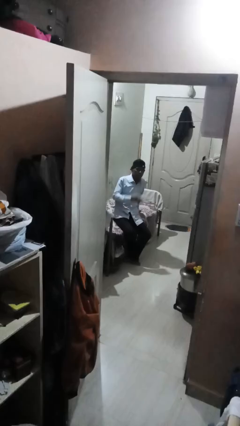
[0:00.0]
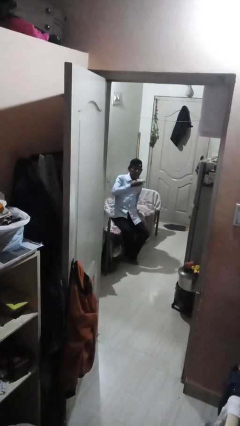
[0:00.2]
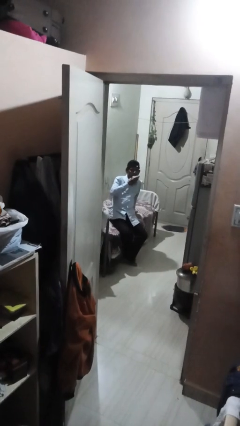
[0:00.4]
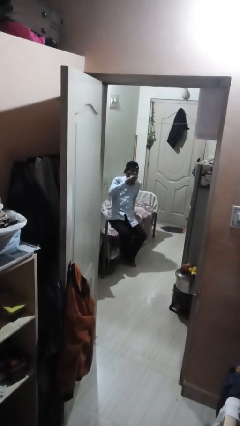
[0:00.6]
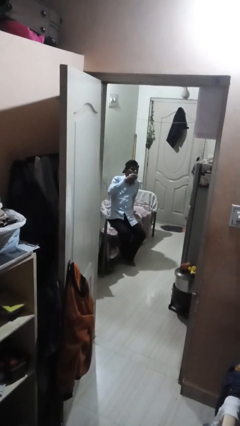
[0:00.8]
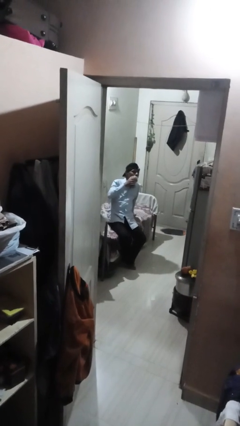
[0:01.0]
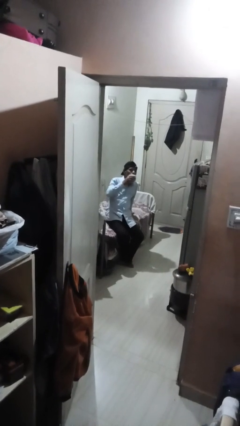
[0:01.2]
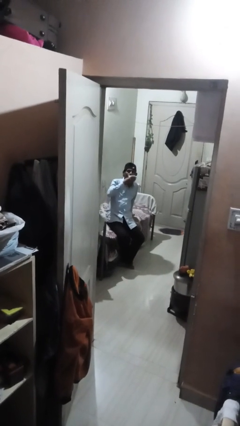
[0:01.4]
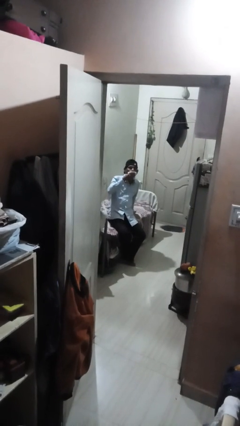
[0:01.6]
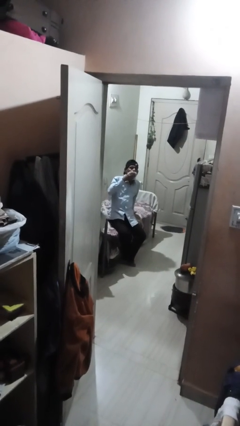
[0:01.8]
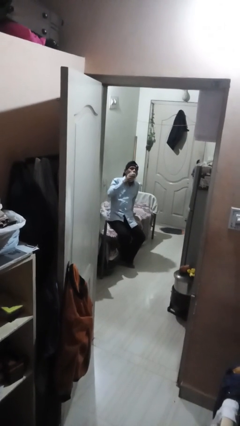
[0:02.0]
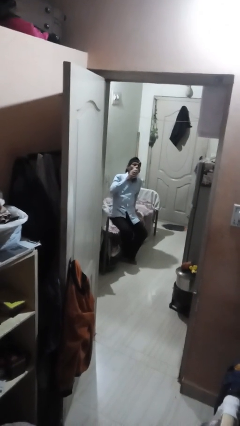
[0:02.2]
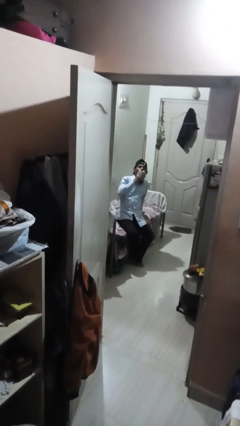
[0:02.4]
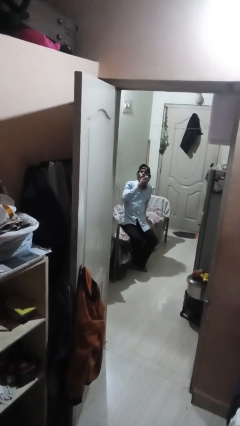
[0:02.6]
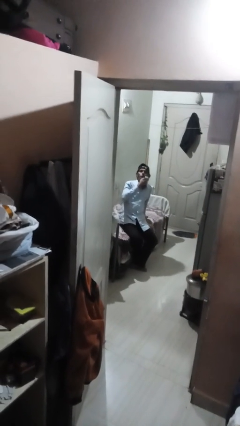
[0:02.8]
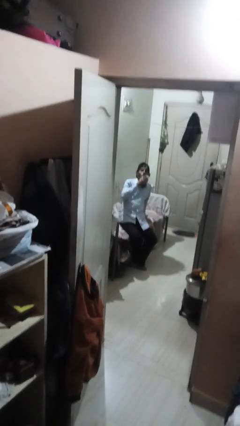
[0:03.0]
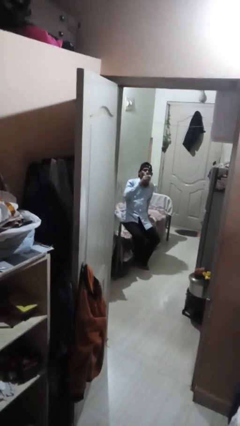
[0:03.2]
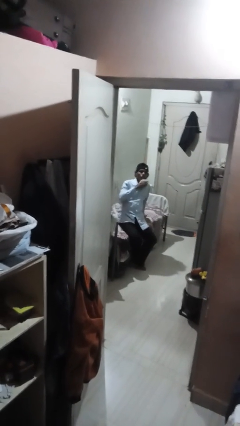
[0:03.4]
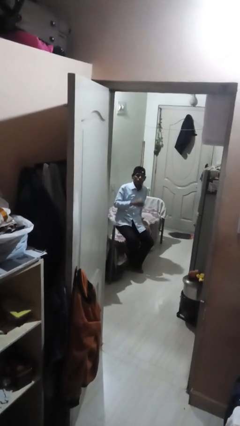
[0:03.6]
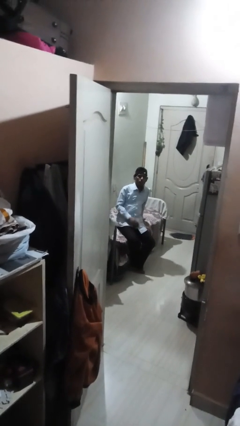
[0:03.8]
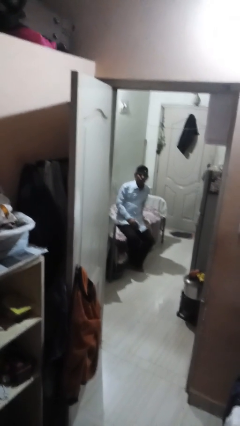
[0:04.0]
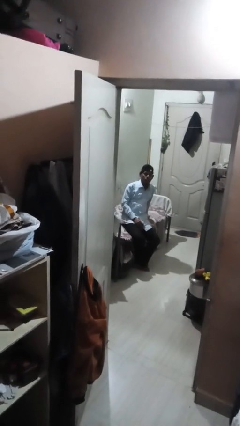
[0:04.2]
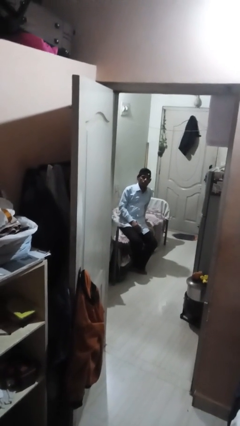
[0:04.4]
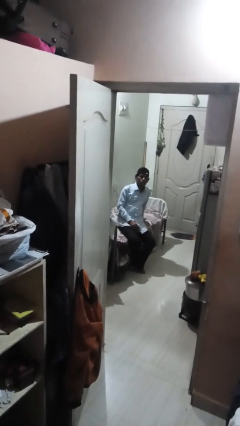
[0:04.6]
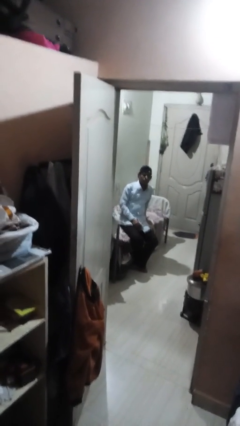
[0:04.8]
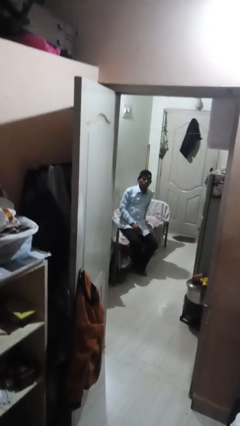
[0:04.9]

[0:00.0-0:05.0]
person wipes mouth with napkin

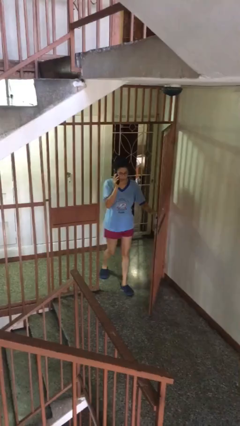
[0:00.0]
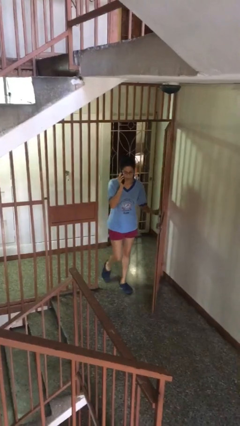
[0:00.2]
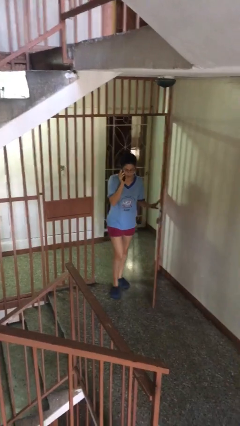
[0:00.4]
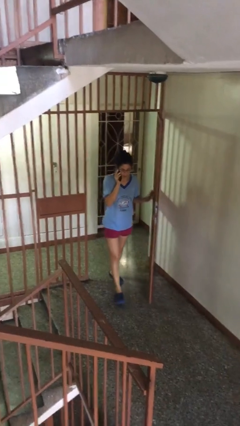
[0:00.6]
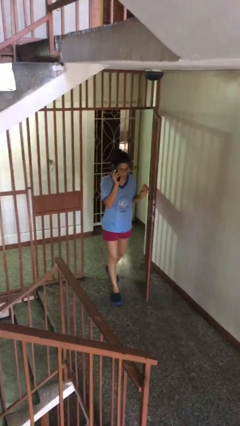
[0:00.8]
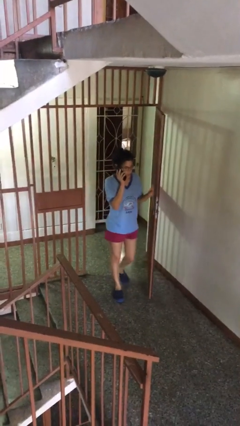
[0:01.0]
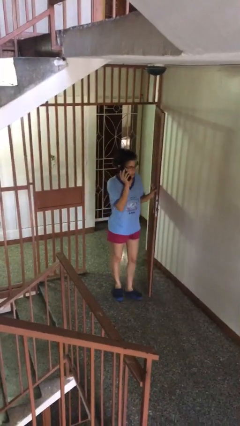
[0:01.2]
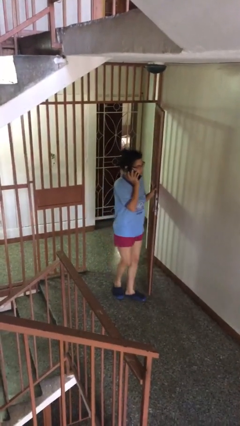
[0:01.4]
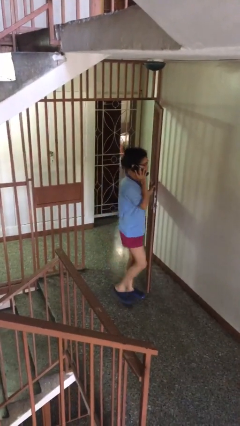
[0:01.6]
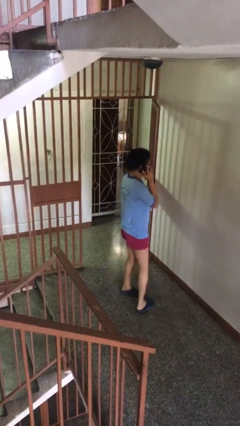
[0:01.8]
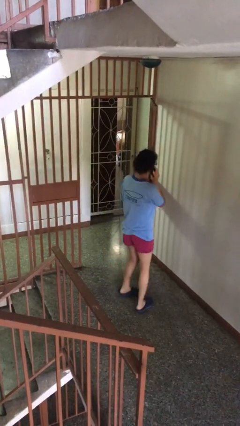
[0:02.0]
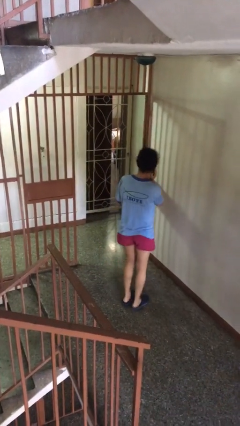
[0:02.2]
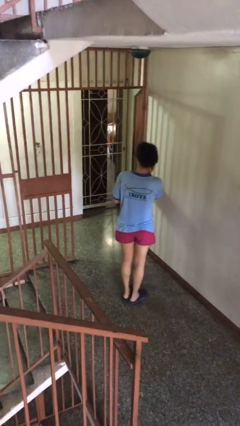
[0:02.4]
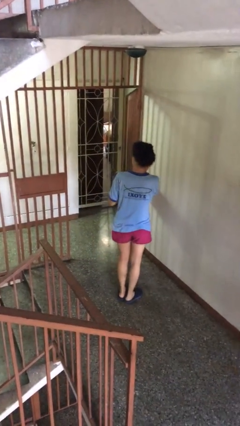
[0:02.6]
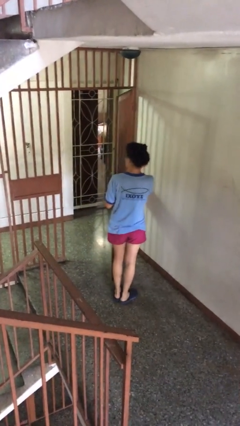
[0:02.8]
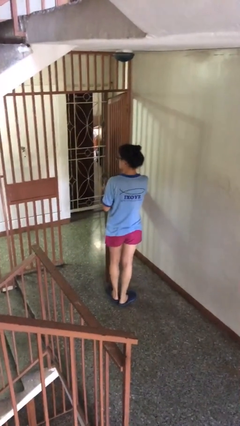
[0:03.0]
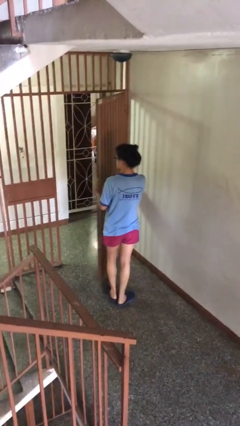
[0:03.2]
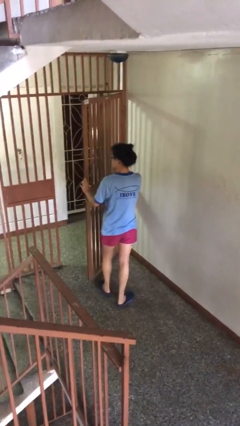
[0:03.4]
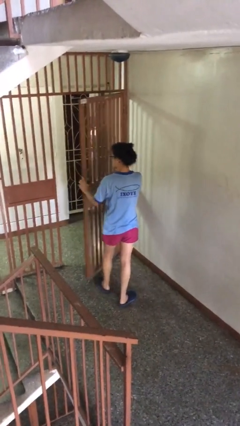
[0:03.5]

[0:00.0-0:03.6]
person enters scene through structure

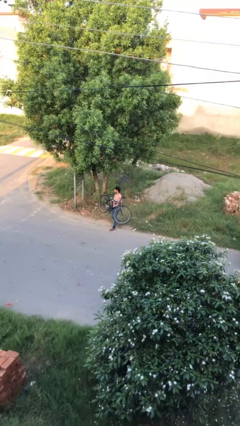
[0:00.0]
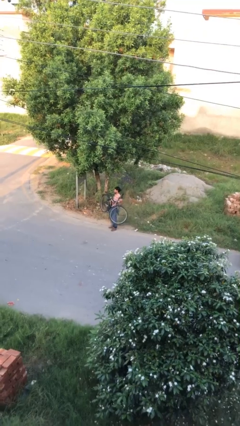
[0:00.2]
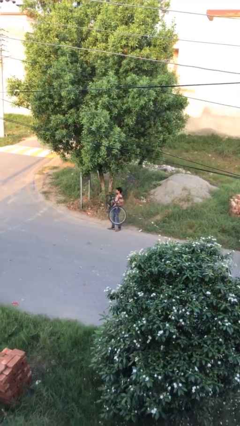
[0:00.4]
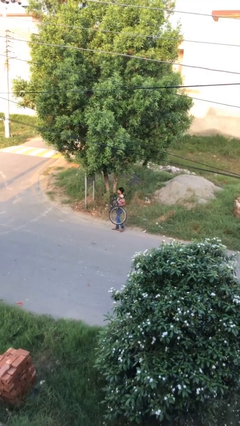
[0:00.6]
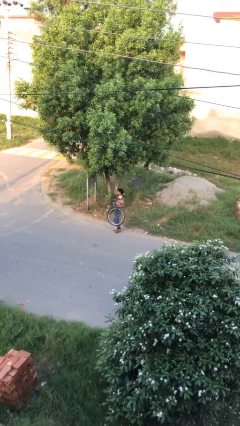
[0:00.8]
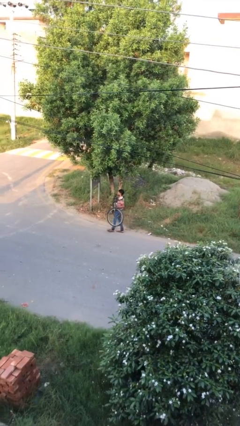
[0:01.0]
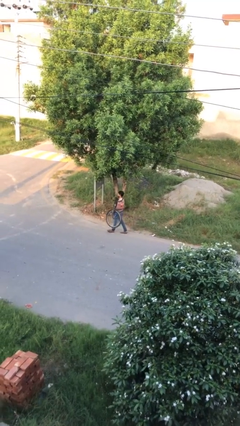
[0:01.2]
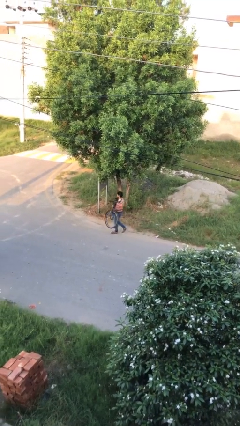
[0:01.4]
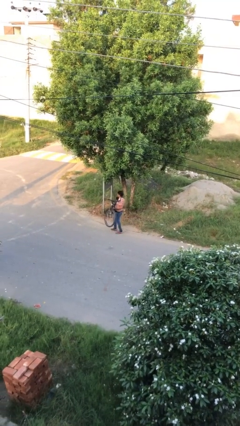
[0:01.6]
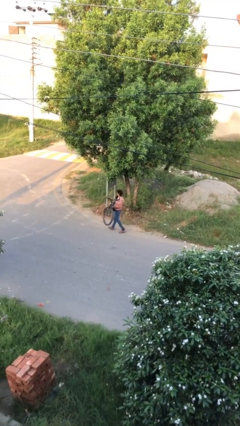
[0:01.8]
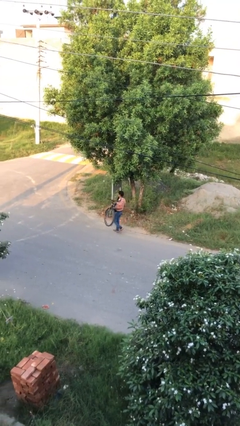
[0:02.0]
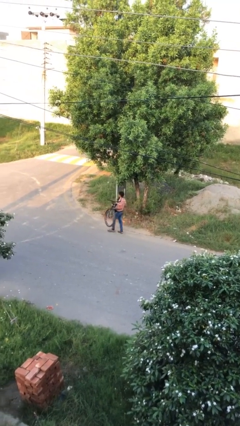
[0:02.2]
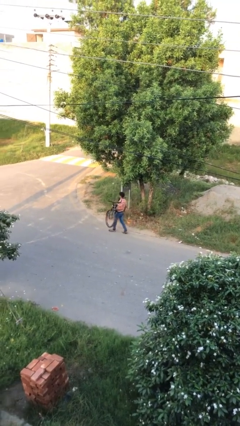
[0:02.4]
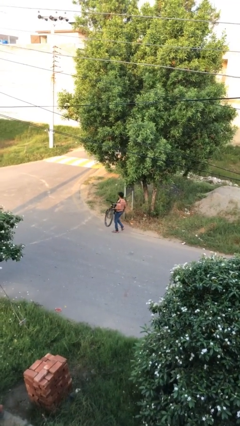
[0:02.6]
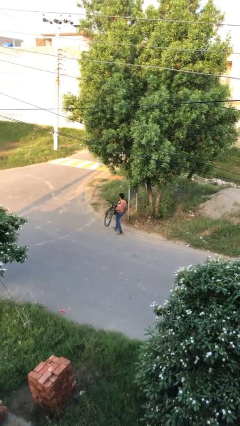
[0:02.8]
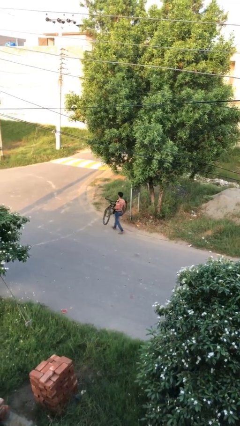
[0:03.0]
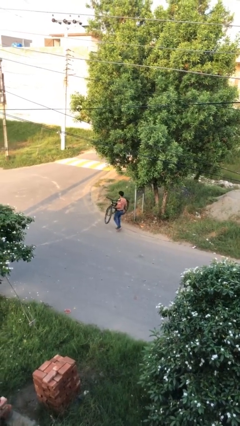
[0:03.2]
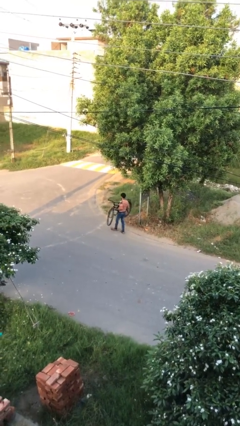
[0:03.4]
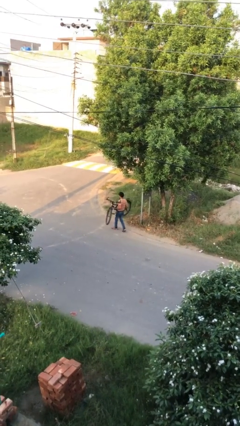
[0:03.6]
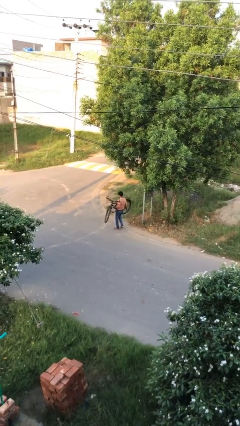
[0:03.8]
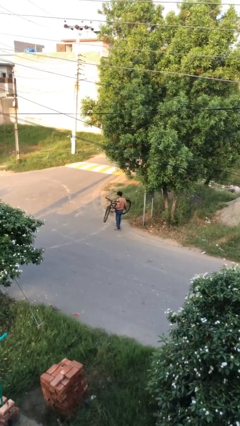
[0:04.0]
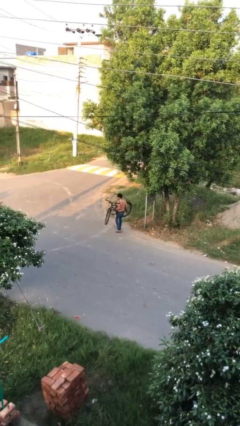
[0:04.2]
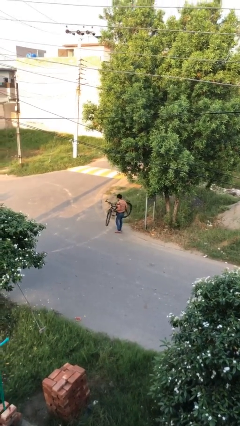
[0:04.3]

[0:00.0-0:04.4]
person carries heavy object

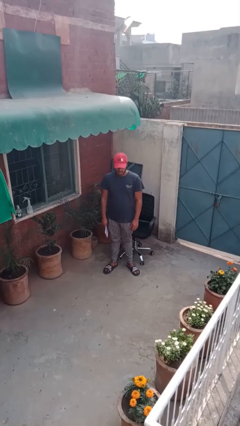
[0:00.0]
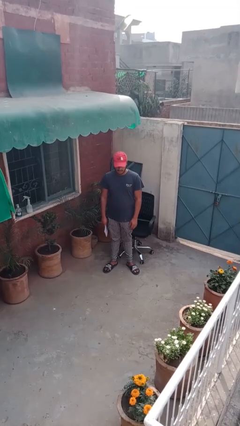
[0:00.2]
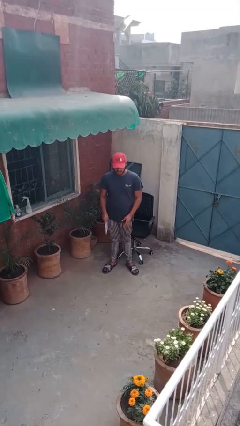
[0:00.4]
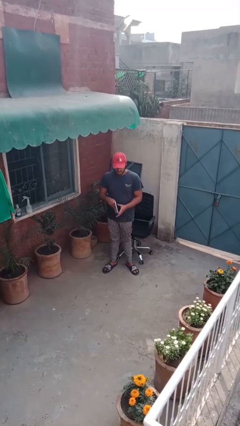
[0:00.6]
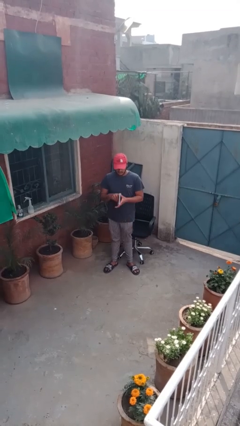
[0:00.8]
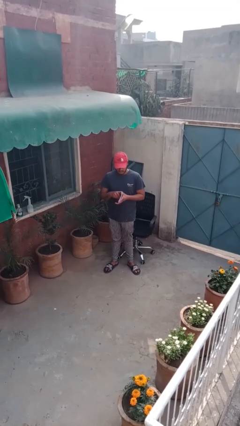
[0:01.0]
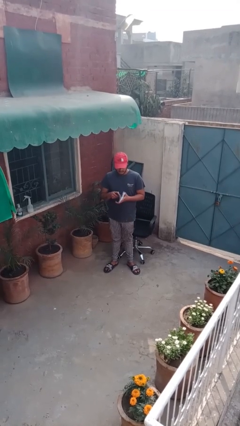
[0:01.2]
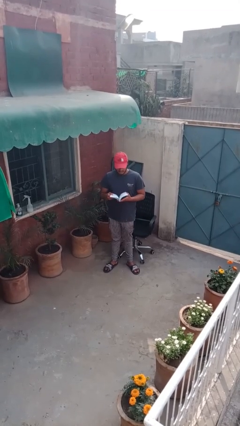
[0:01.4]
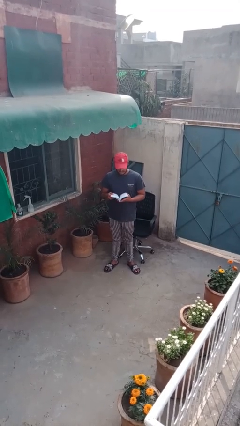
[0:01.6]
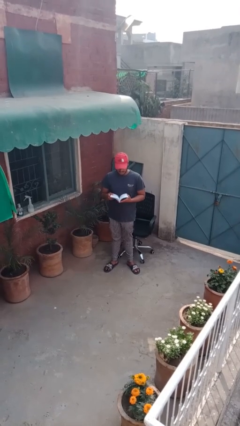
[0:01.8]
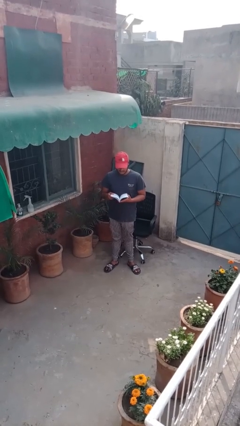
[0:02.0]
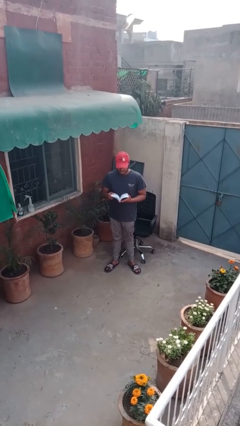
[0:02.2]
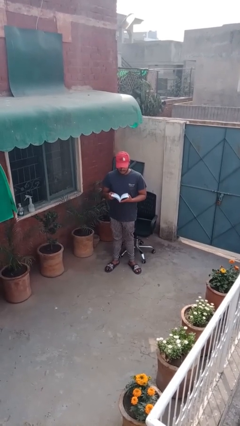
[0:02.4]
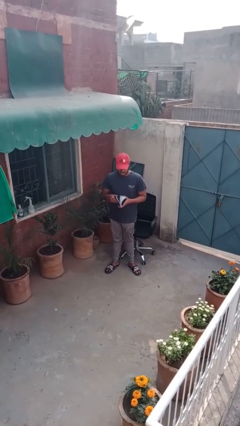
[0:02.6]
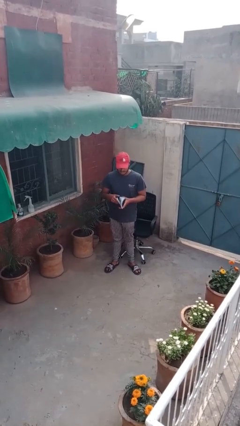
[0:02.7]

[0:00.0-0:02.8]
person reads document

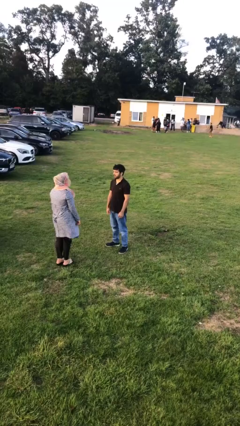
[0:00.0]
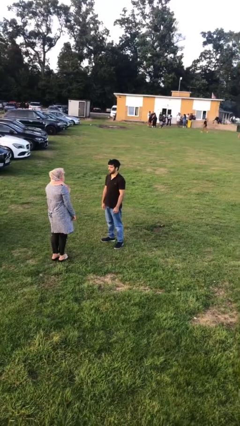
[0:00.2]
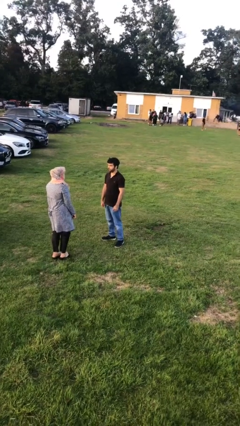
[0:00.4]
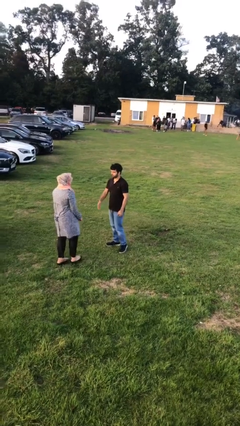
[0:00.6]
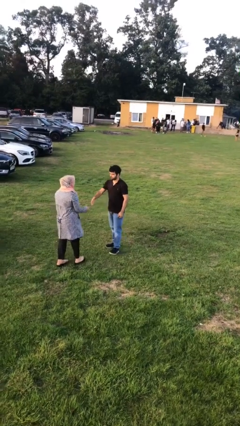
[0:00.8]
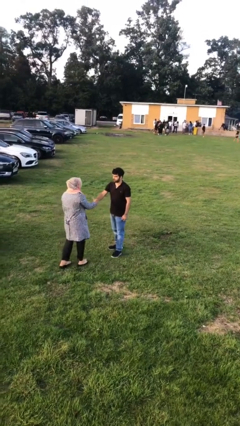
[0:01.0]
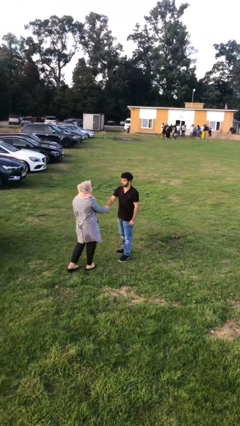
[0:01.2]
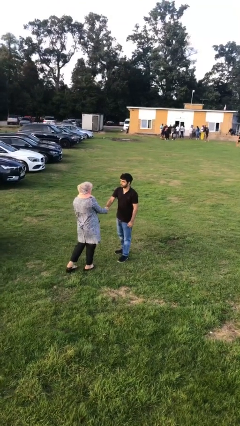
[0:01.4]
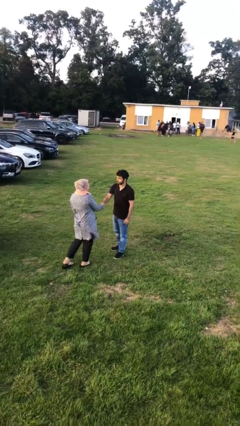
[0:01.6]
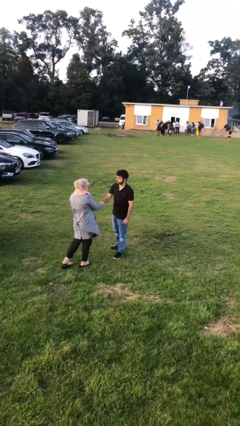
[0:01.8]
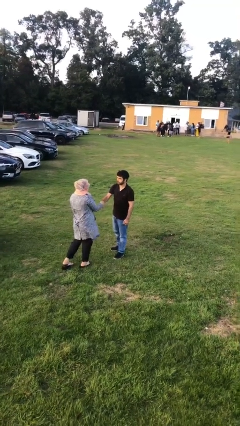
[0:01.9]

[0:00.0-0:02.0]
person shakes hand
